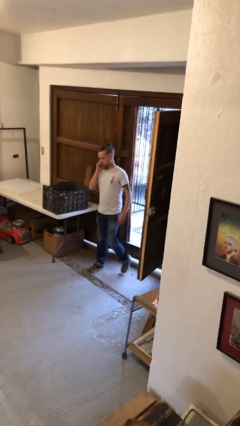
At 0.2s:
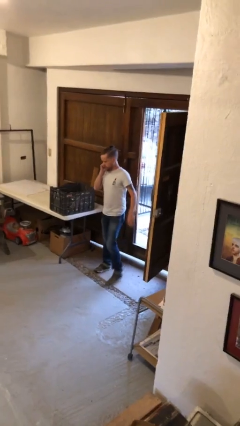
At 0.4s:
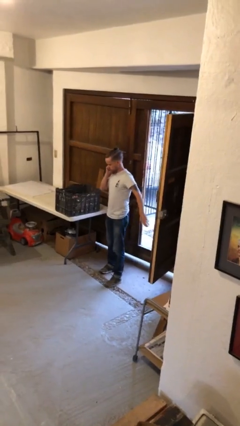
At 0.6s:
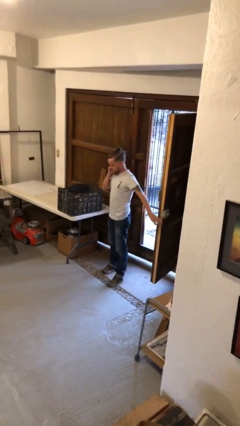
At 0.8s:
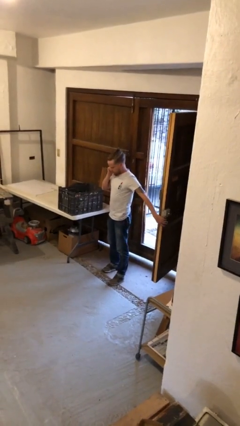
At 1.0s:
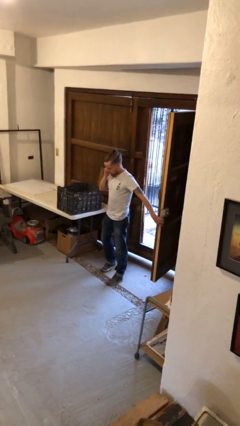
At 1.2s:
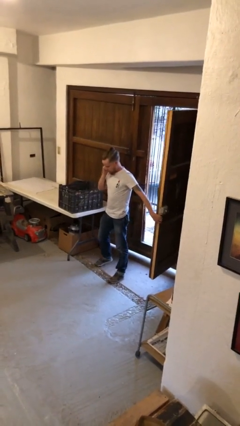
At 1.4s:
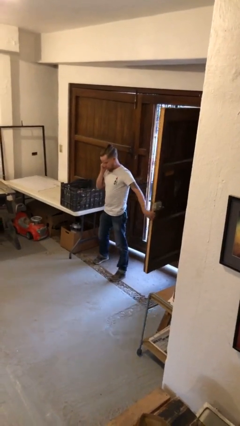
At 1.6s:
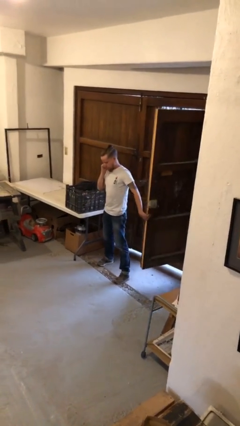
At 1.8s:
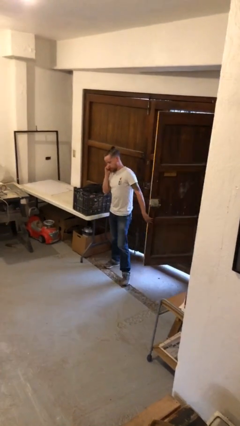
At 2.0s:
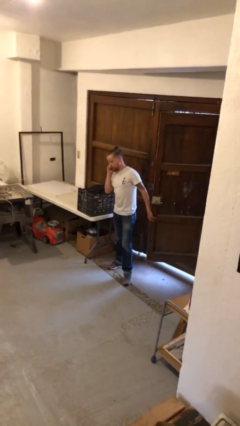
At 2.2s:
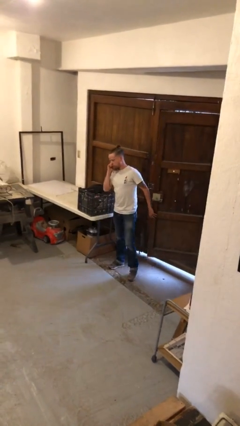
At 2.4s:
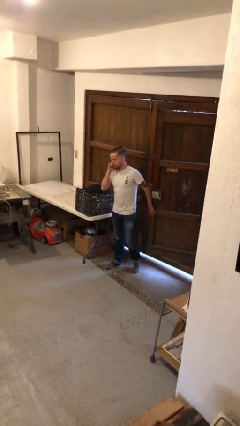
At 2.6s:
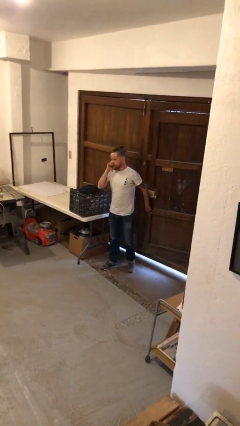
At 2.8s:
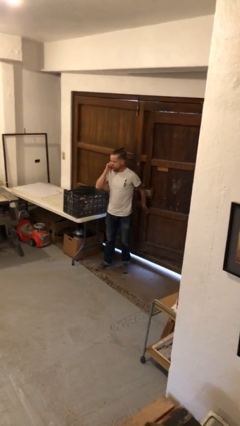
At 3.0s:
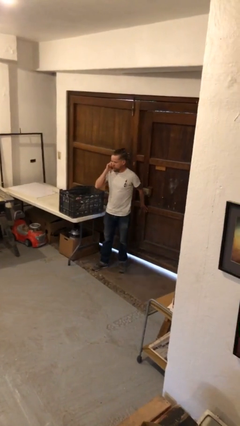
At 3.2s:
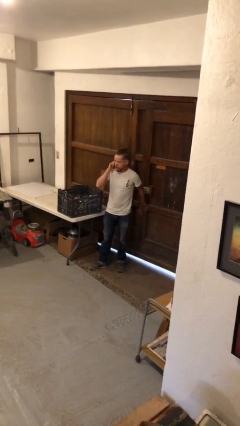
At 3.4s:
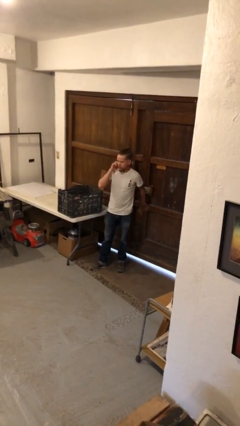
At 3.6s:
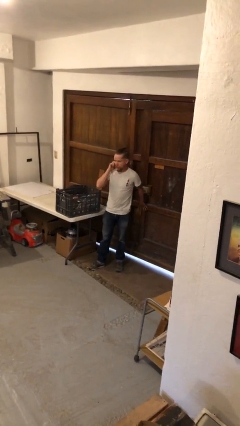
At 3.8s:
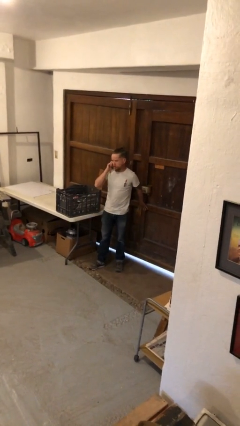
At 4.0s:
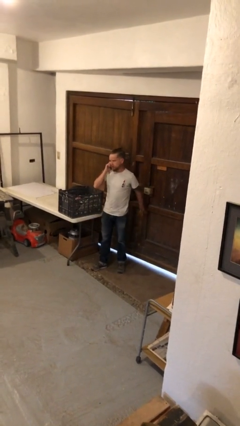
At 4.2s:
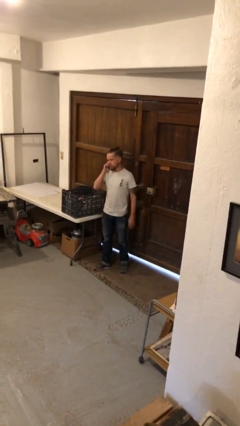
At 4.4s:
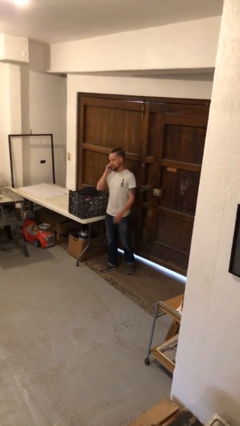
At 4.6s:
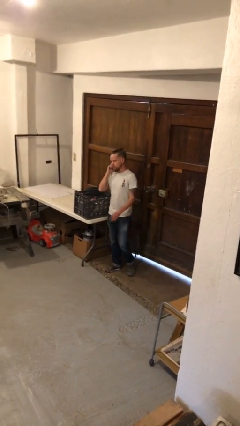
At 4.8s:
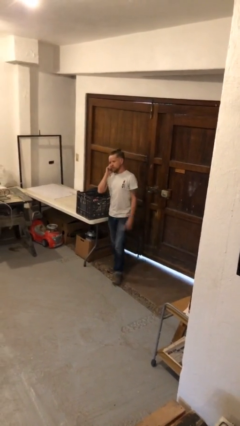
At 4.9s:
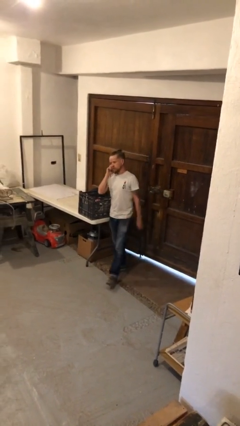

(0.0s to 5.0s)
person closes facility door

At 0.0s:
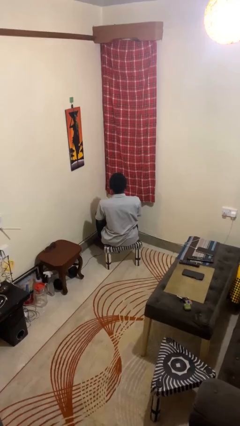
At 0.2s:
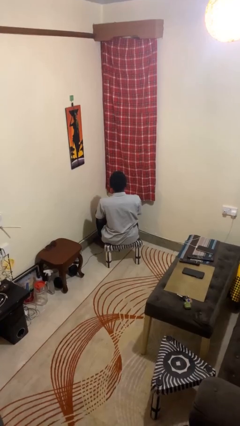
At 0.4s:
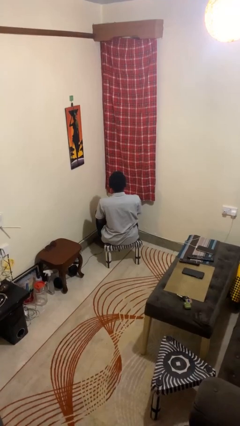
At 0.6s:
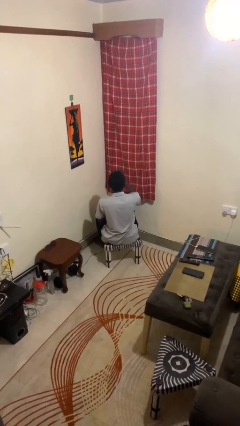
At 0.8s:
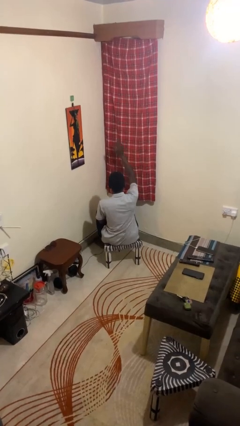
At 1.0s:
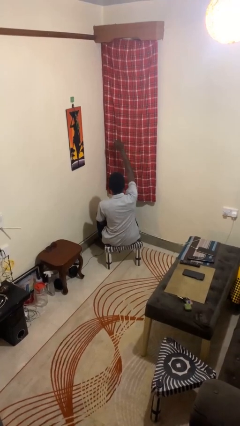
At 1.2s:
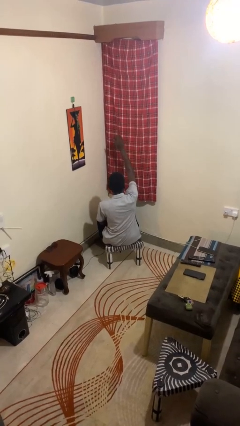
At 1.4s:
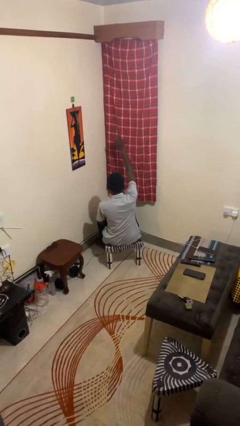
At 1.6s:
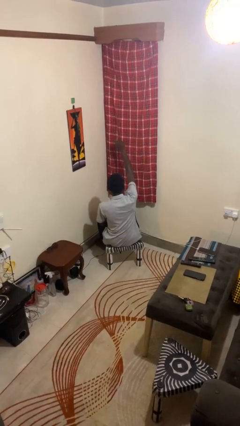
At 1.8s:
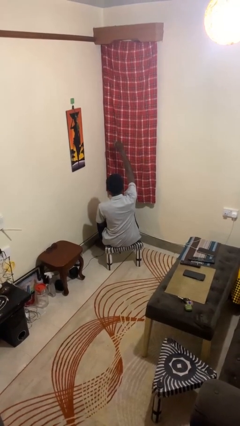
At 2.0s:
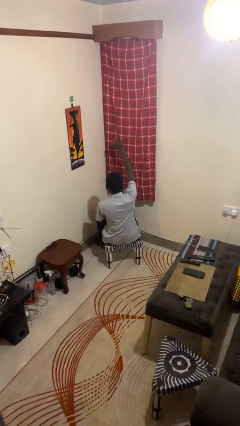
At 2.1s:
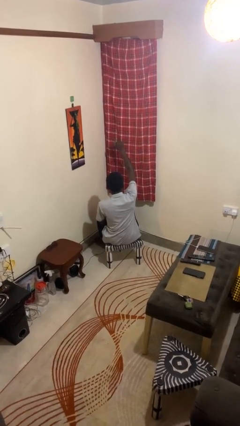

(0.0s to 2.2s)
person gestures come here

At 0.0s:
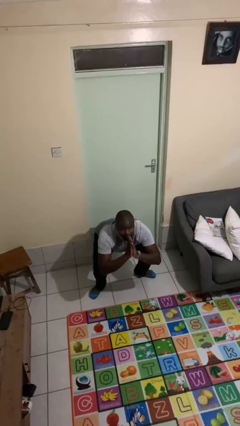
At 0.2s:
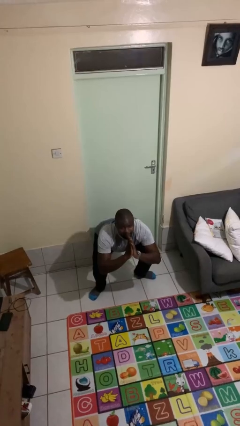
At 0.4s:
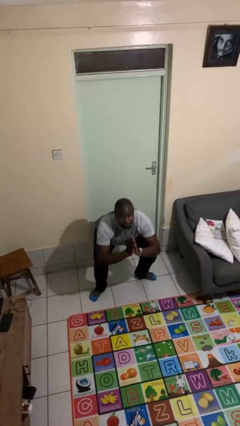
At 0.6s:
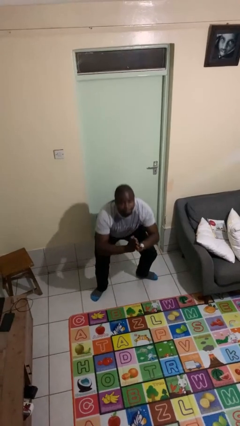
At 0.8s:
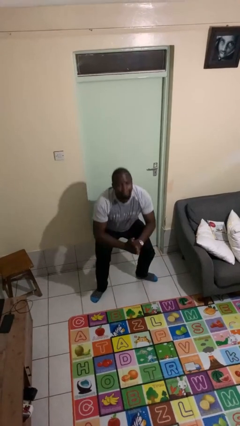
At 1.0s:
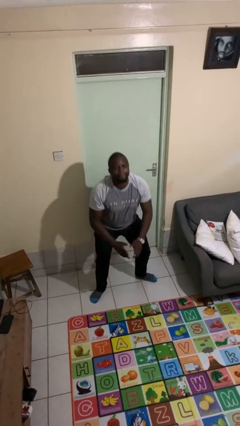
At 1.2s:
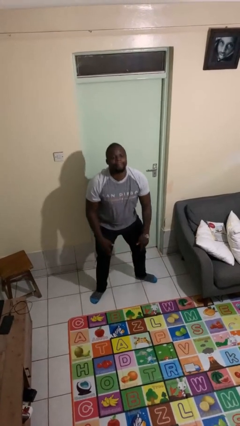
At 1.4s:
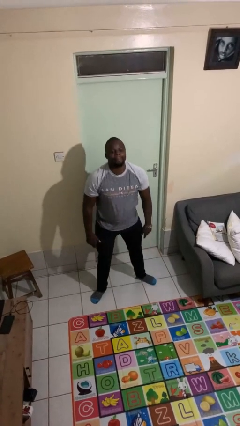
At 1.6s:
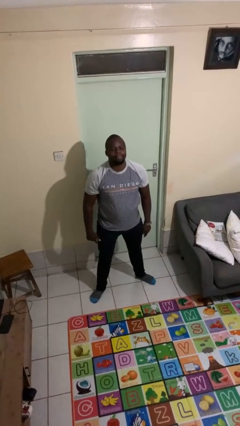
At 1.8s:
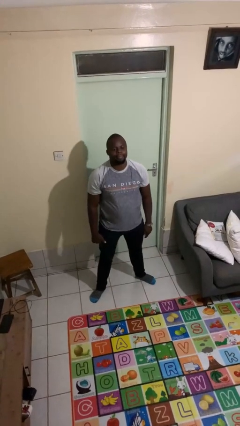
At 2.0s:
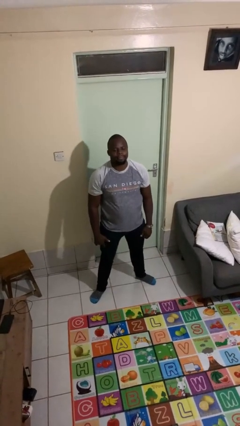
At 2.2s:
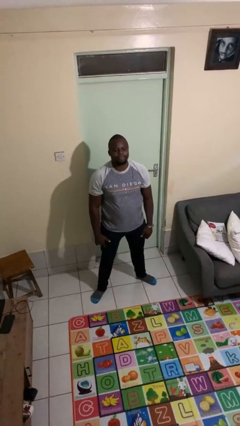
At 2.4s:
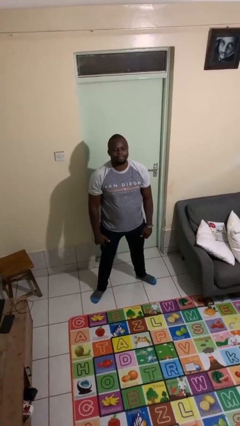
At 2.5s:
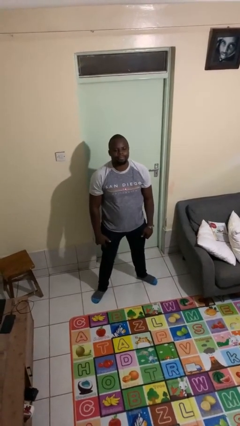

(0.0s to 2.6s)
person stands up

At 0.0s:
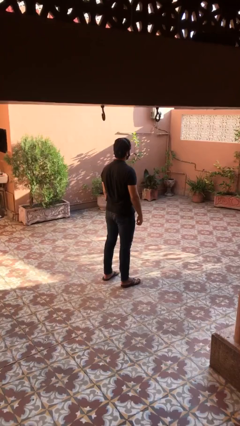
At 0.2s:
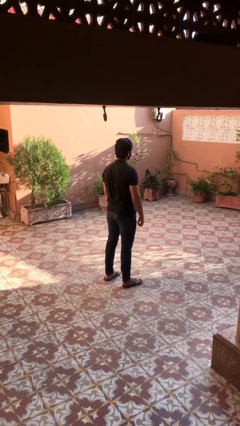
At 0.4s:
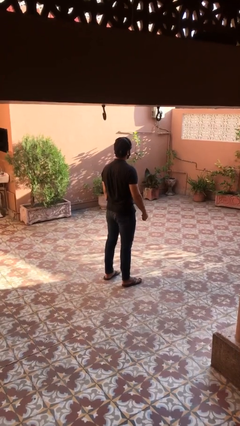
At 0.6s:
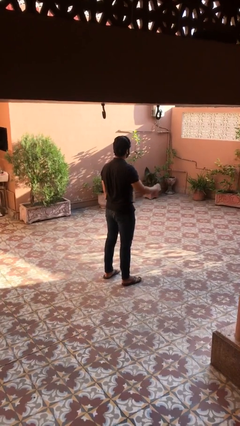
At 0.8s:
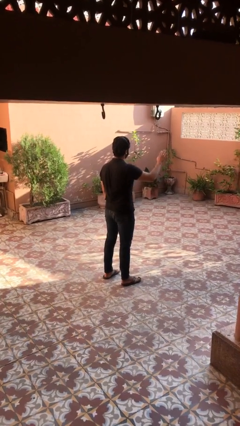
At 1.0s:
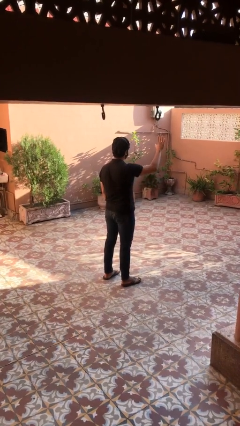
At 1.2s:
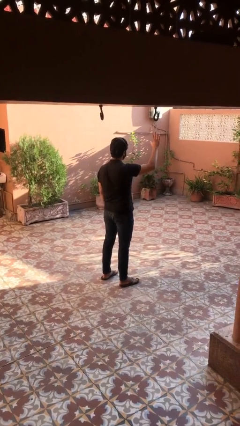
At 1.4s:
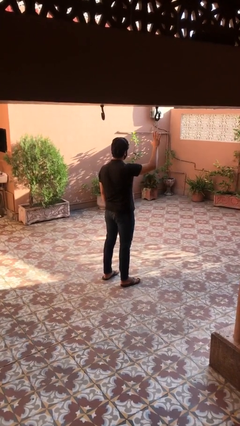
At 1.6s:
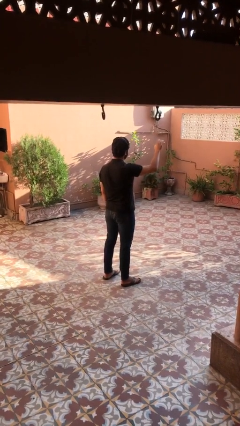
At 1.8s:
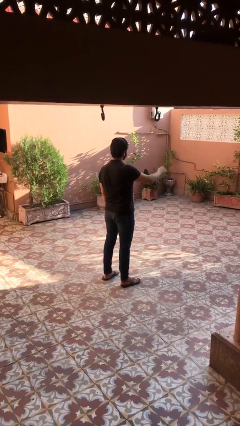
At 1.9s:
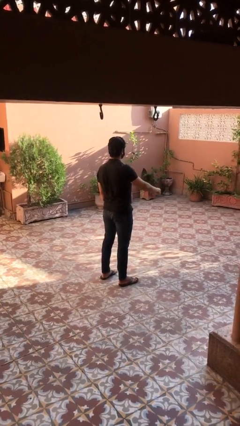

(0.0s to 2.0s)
person gestures number five

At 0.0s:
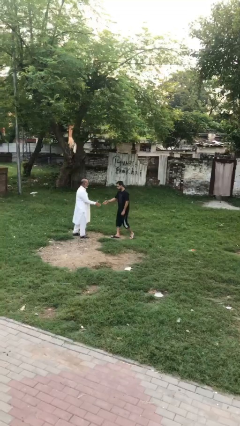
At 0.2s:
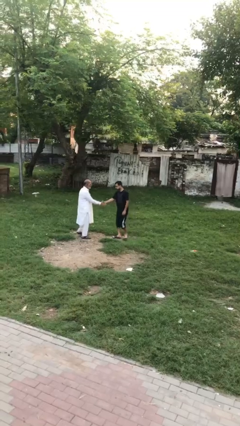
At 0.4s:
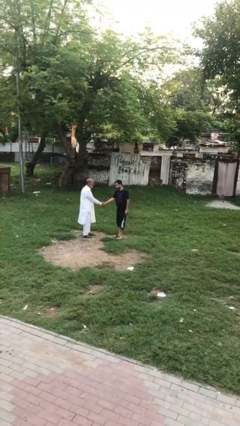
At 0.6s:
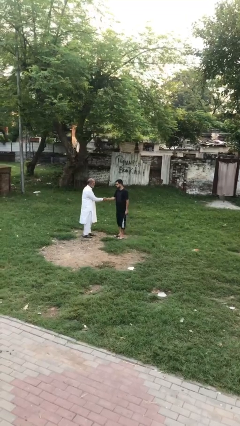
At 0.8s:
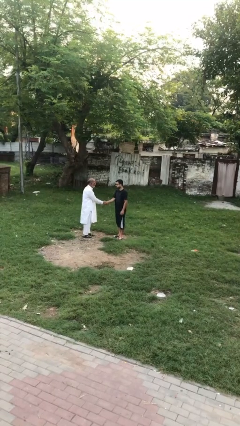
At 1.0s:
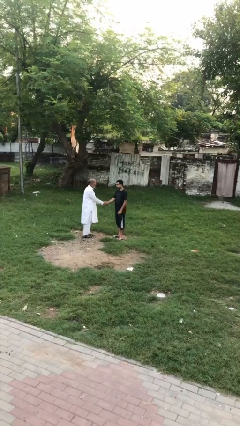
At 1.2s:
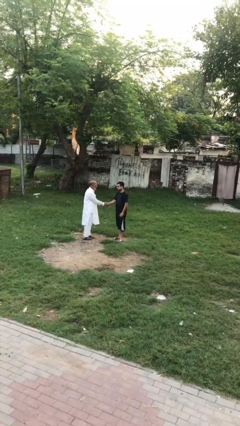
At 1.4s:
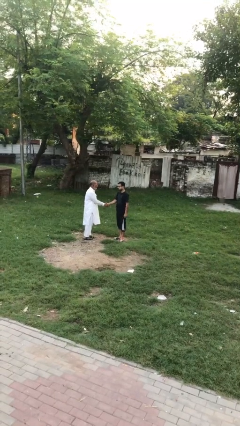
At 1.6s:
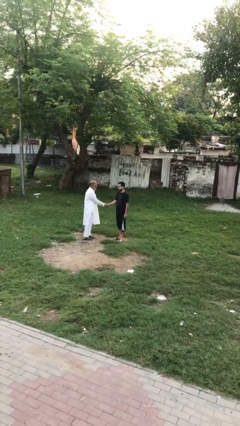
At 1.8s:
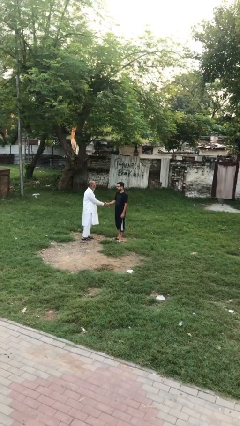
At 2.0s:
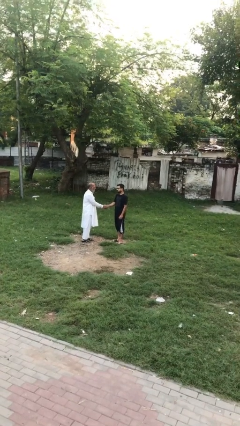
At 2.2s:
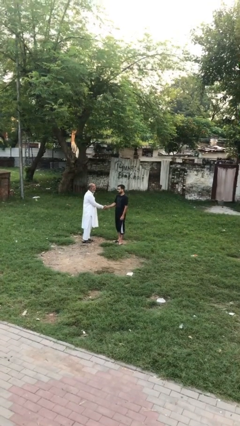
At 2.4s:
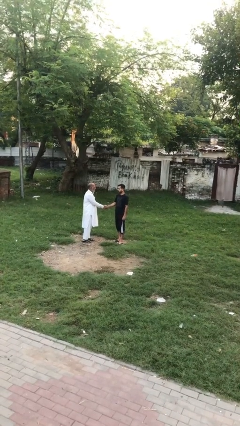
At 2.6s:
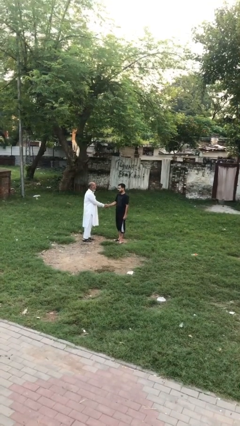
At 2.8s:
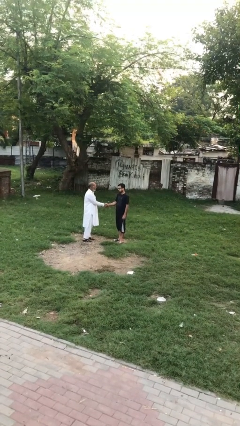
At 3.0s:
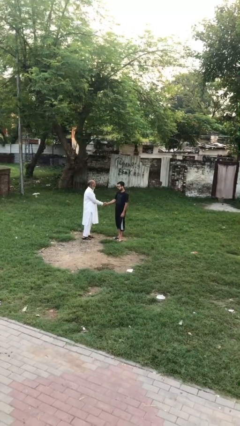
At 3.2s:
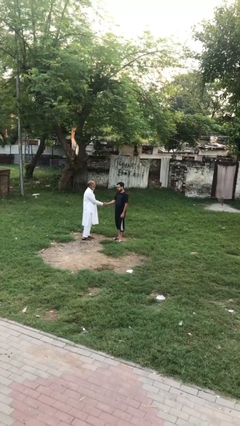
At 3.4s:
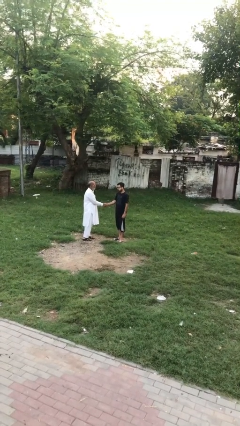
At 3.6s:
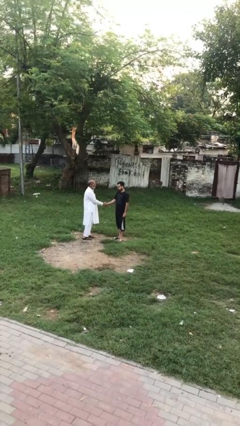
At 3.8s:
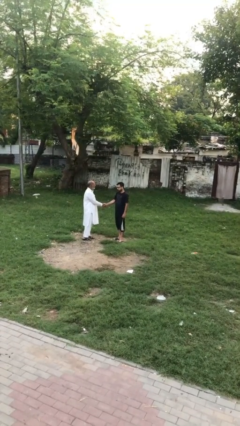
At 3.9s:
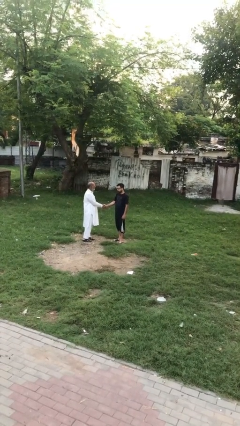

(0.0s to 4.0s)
person shakes hand

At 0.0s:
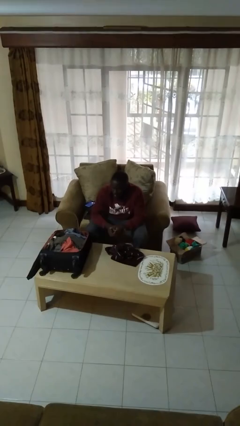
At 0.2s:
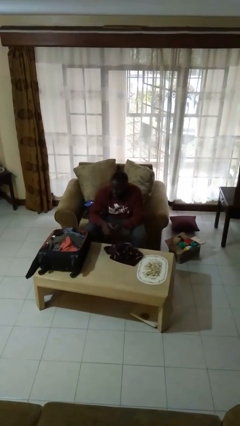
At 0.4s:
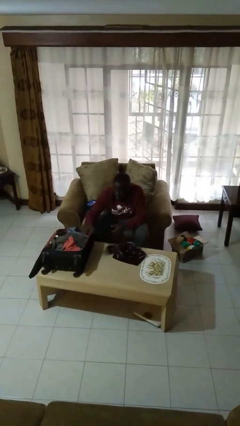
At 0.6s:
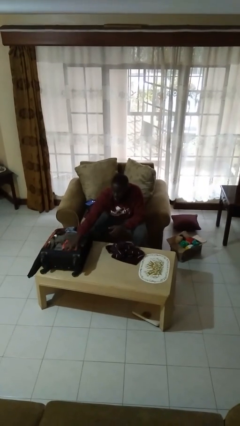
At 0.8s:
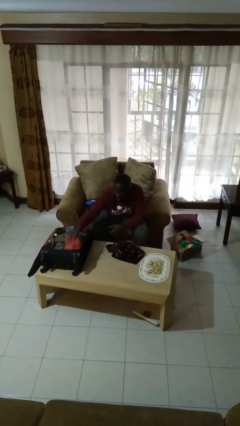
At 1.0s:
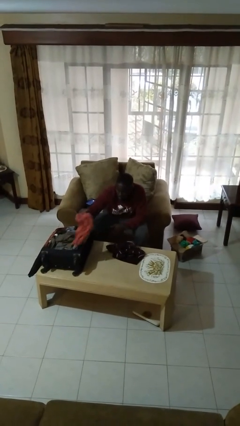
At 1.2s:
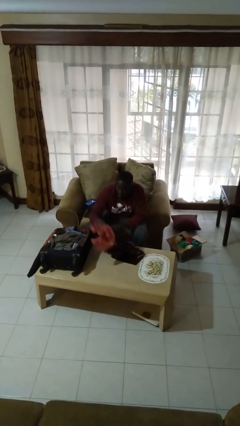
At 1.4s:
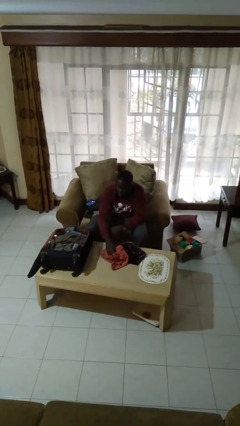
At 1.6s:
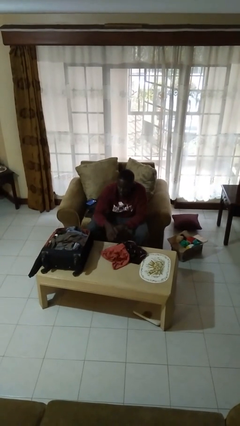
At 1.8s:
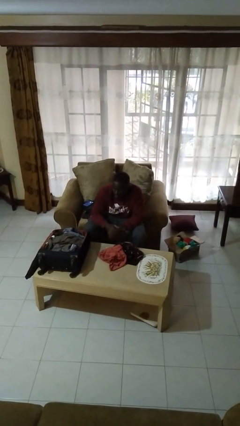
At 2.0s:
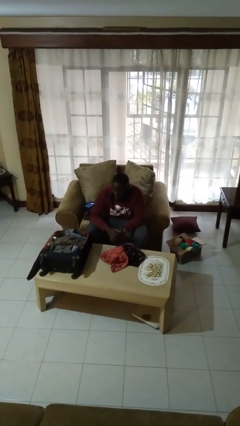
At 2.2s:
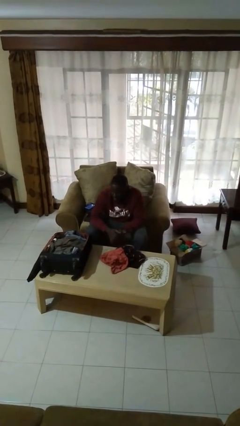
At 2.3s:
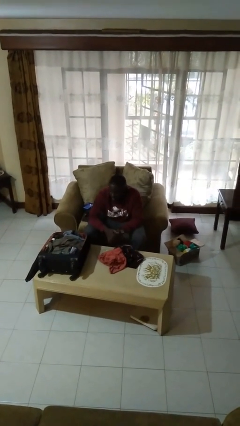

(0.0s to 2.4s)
person unloads clothes from suitcase
